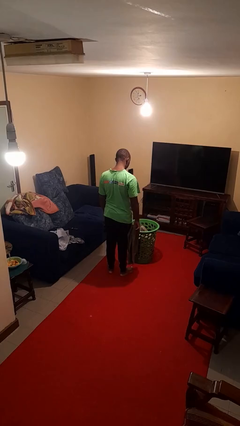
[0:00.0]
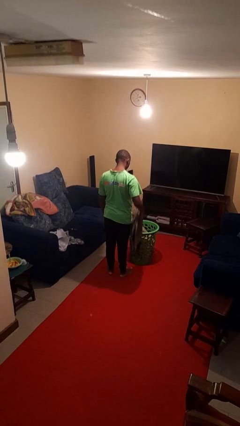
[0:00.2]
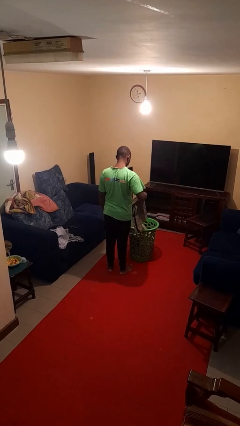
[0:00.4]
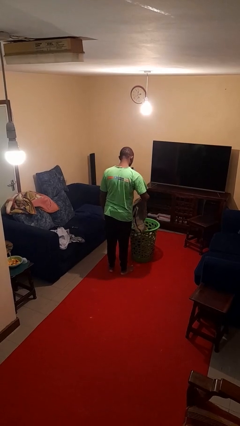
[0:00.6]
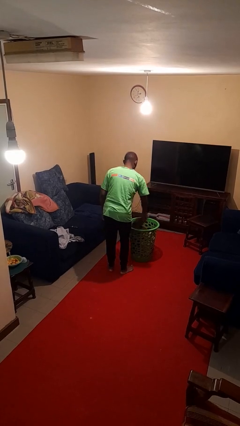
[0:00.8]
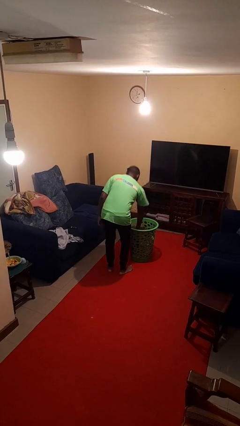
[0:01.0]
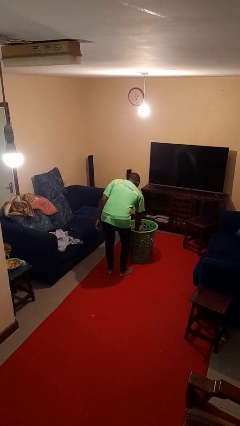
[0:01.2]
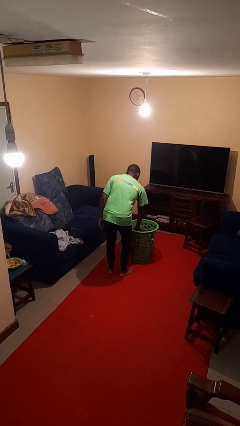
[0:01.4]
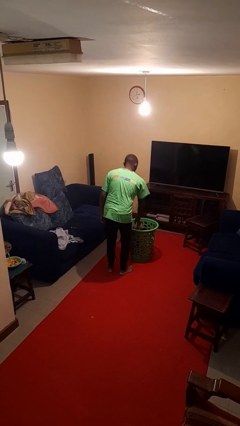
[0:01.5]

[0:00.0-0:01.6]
person puts object into basket

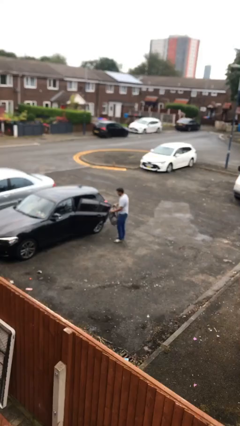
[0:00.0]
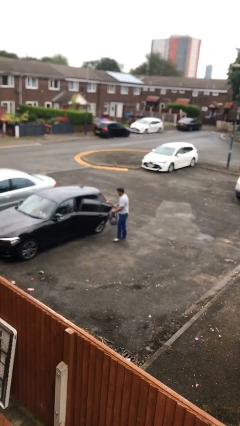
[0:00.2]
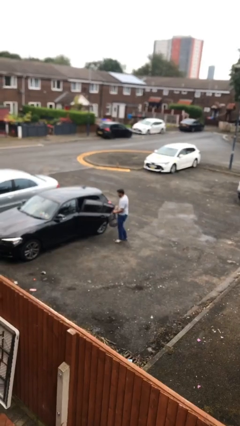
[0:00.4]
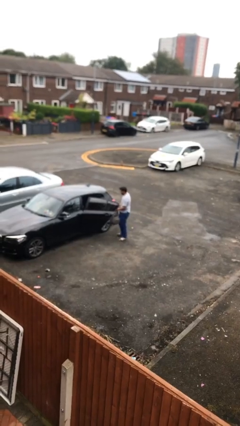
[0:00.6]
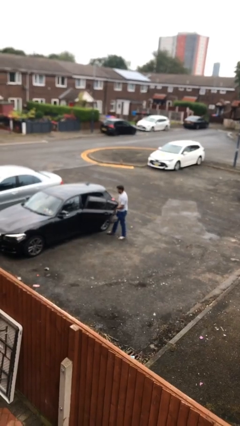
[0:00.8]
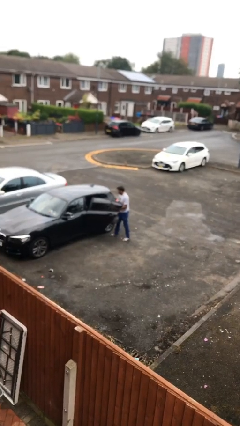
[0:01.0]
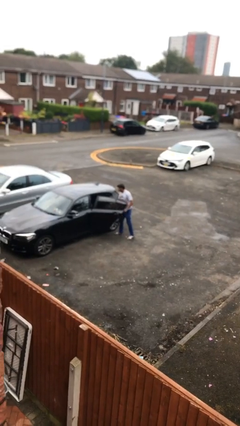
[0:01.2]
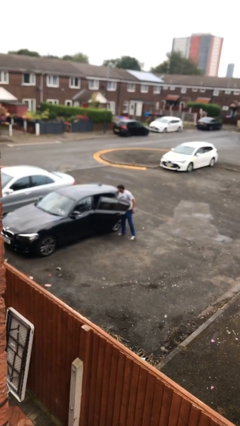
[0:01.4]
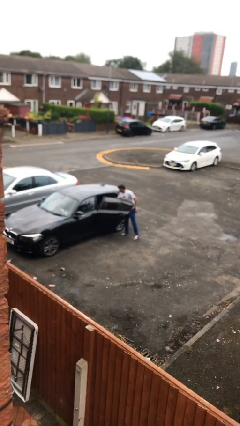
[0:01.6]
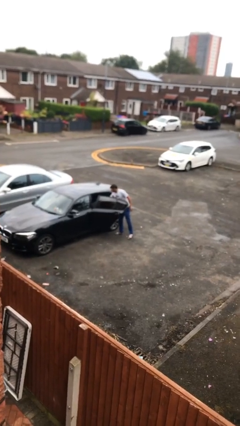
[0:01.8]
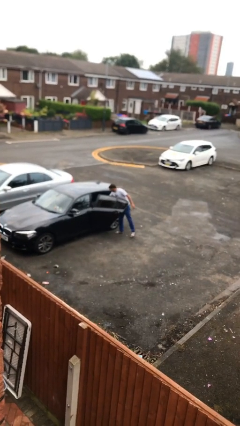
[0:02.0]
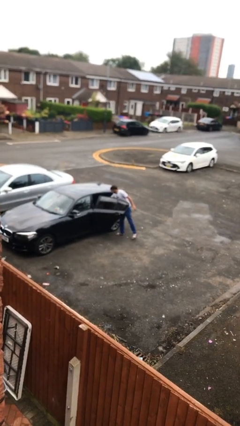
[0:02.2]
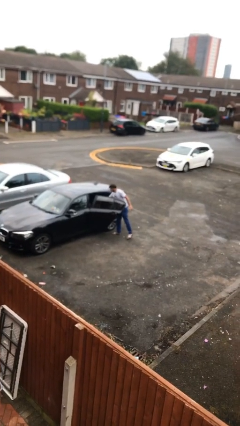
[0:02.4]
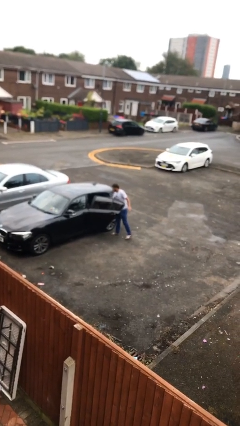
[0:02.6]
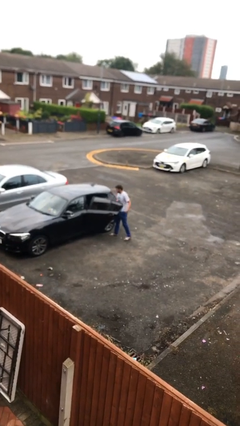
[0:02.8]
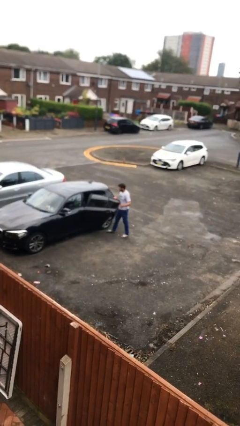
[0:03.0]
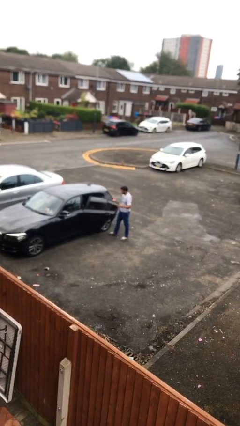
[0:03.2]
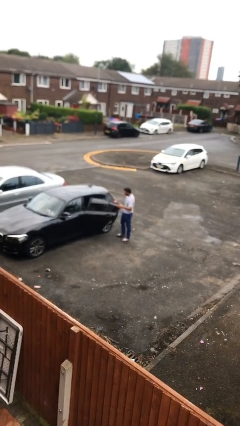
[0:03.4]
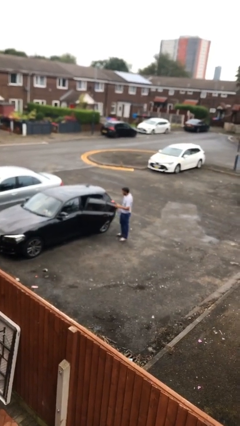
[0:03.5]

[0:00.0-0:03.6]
person loads car

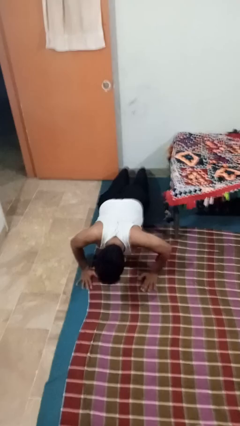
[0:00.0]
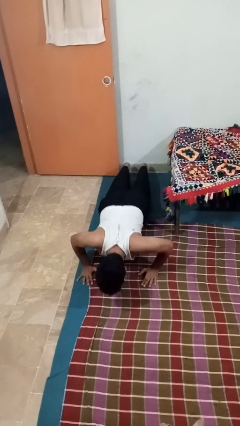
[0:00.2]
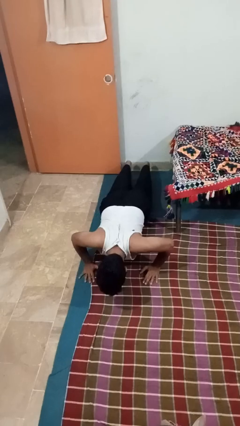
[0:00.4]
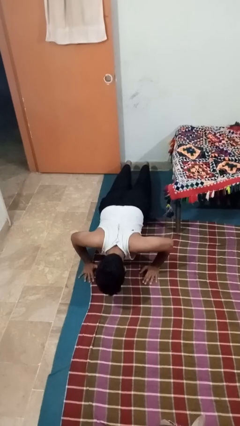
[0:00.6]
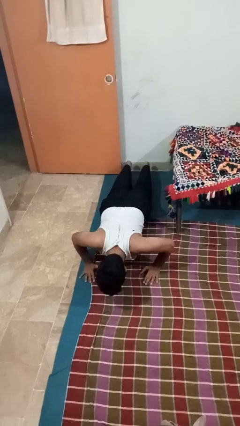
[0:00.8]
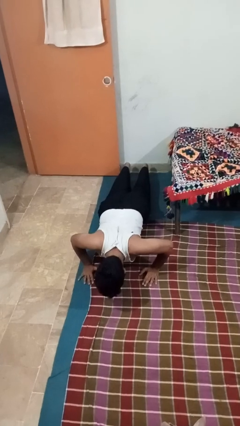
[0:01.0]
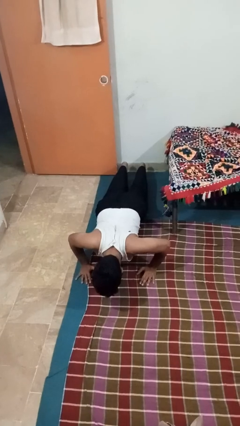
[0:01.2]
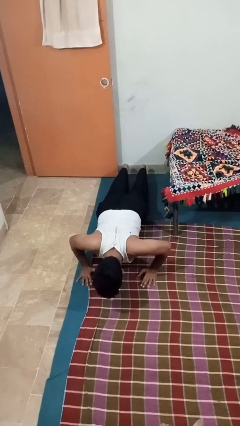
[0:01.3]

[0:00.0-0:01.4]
person exercises with pushup

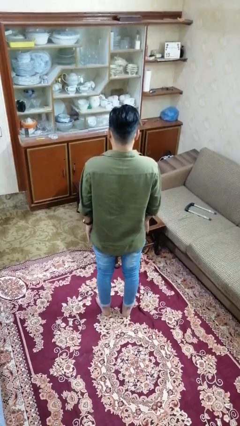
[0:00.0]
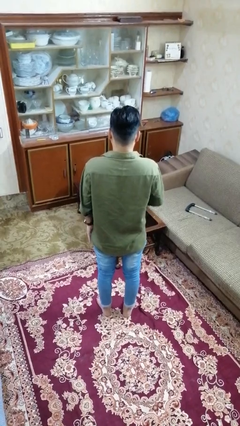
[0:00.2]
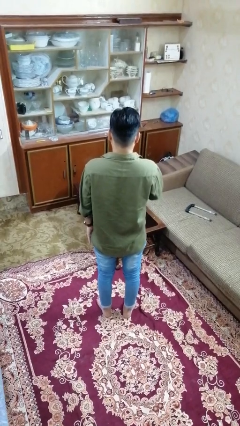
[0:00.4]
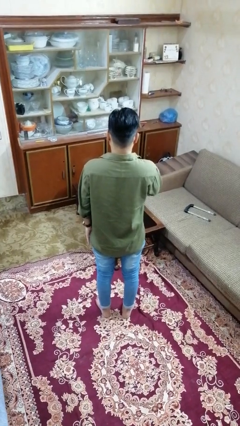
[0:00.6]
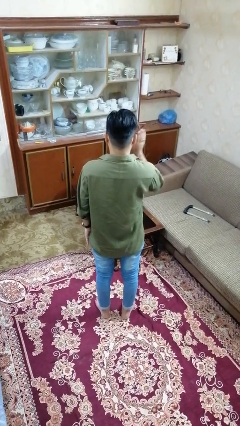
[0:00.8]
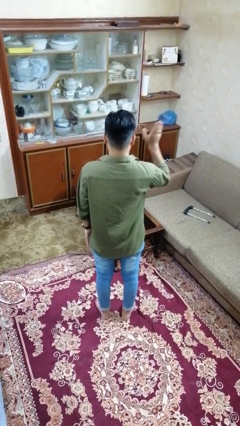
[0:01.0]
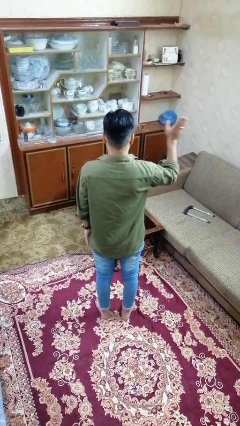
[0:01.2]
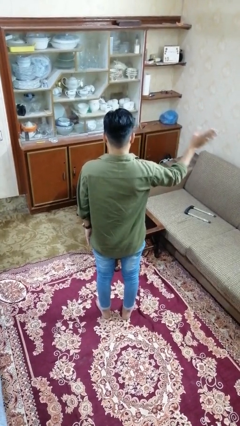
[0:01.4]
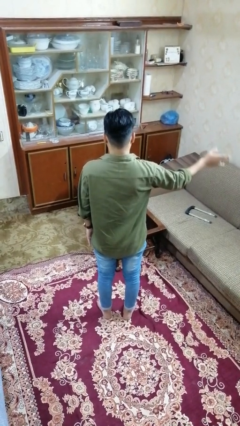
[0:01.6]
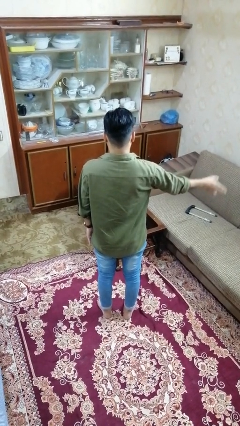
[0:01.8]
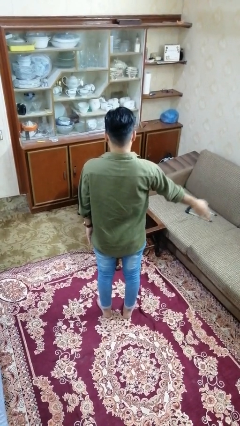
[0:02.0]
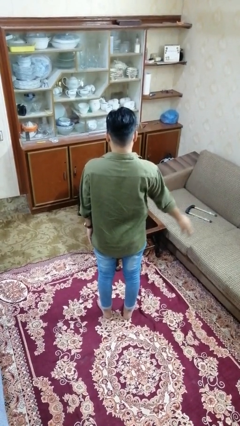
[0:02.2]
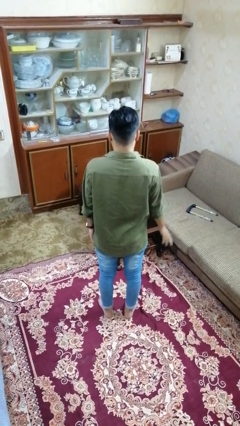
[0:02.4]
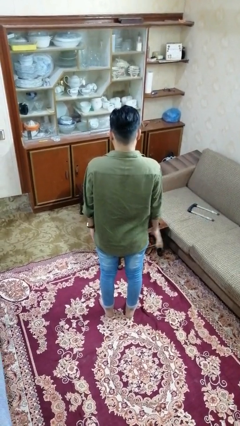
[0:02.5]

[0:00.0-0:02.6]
person gestures swipe right

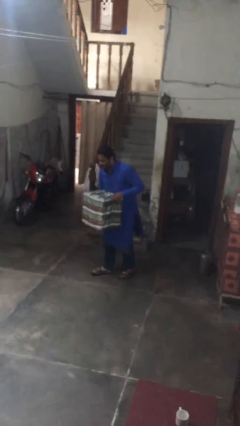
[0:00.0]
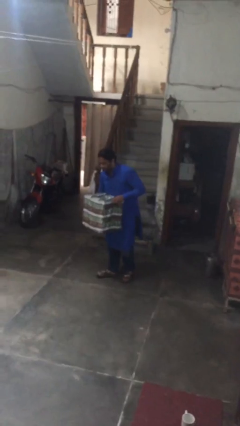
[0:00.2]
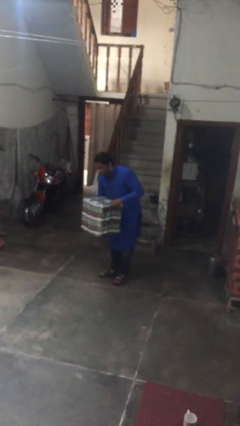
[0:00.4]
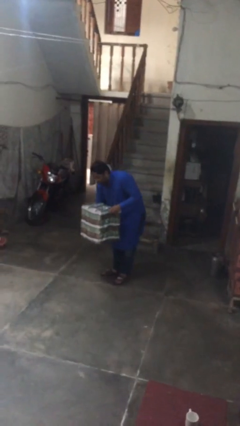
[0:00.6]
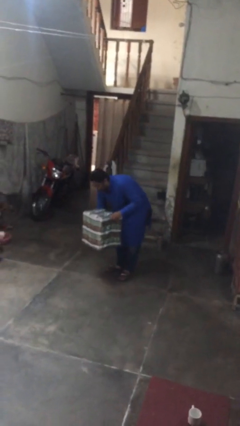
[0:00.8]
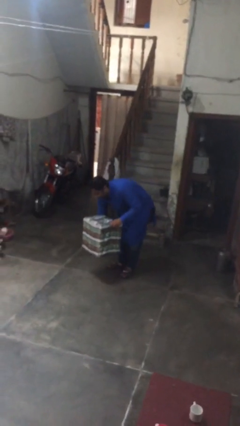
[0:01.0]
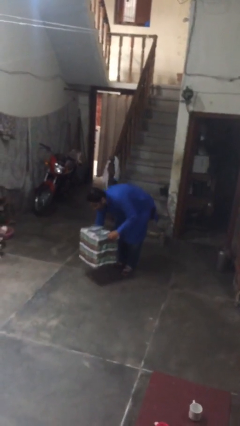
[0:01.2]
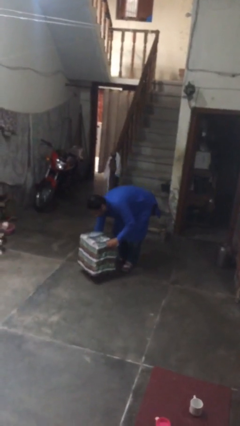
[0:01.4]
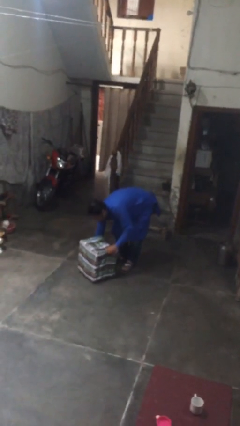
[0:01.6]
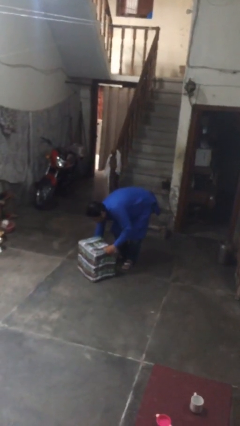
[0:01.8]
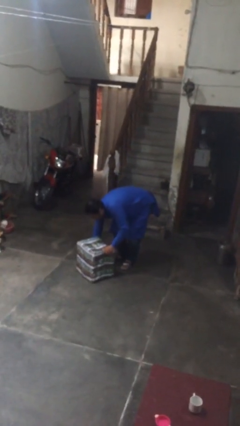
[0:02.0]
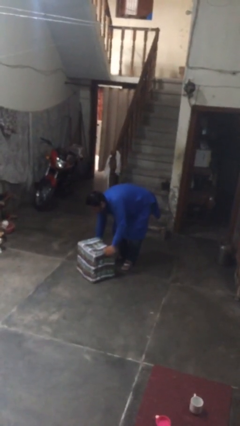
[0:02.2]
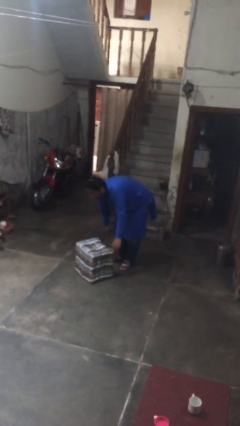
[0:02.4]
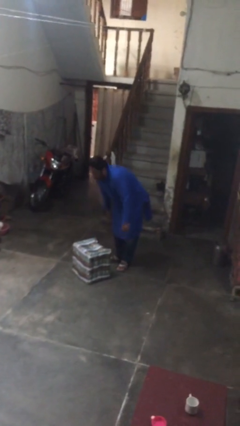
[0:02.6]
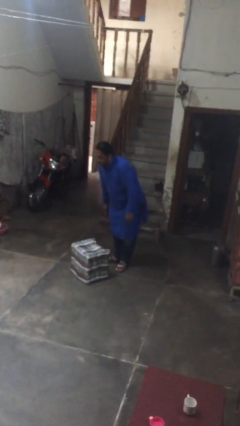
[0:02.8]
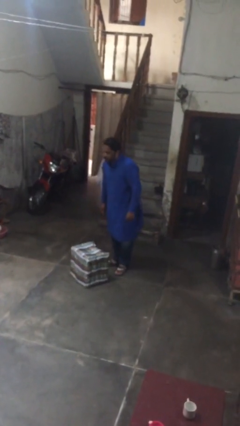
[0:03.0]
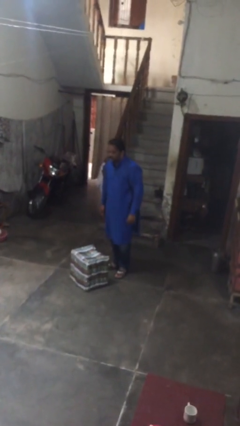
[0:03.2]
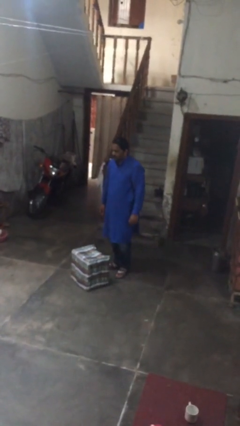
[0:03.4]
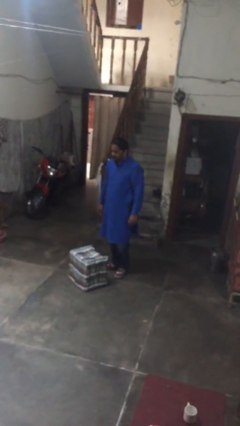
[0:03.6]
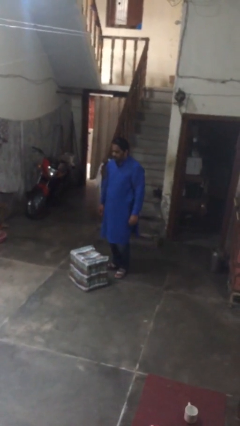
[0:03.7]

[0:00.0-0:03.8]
person puts down object on floor

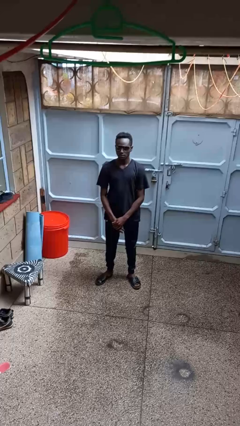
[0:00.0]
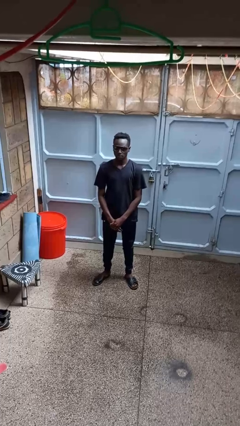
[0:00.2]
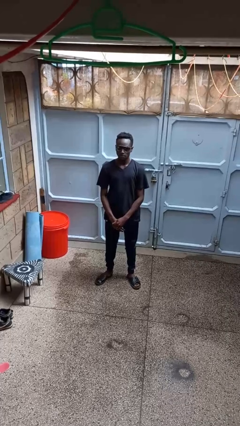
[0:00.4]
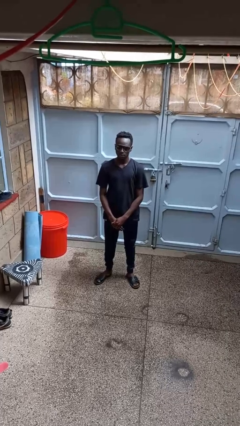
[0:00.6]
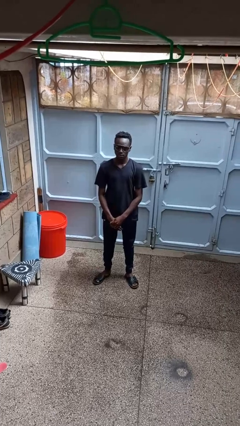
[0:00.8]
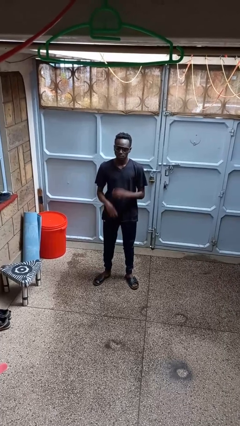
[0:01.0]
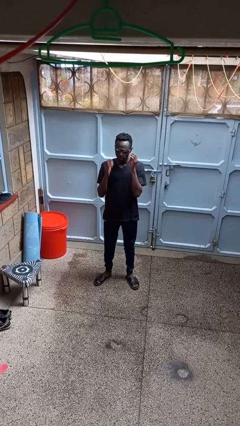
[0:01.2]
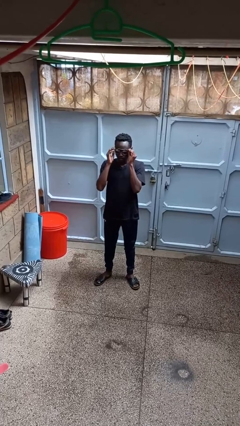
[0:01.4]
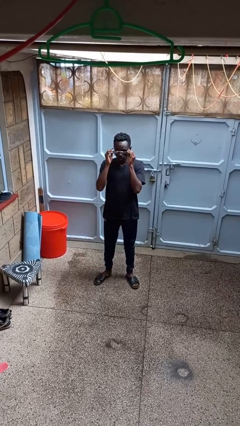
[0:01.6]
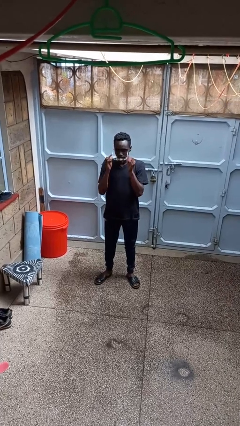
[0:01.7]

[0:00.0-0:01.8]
person takes off sunglasses

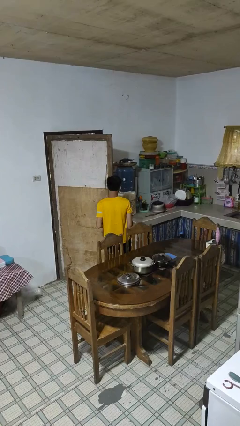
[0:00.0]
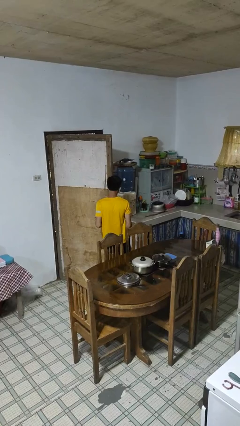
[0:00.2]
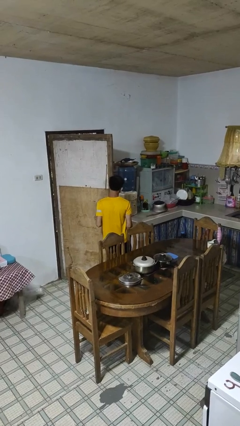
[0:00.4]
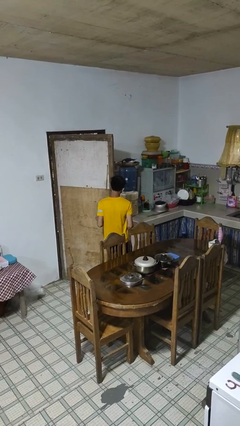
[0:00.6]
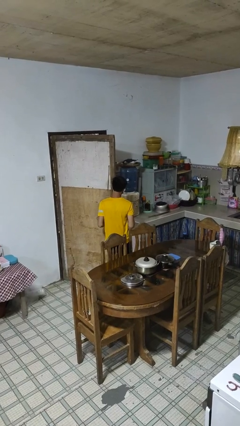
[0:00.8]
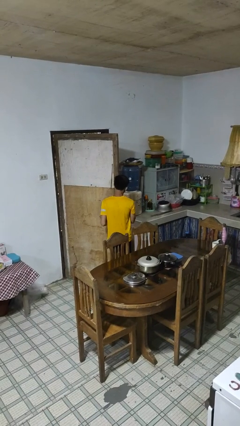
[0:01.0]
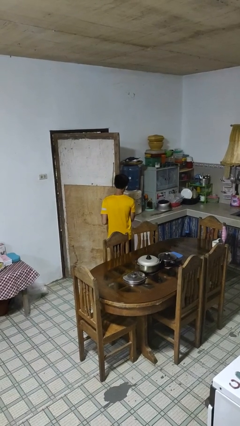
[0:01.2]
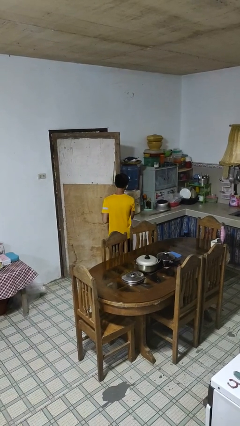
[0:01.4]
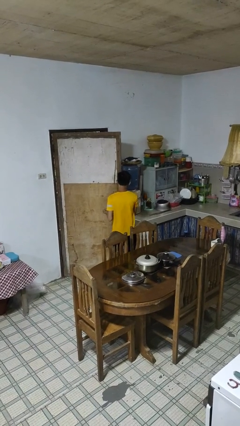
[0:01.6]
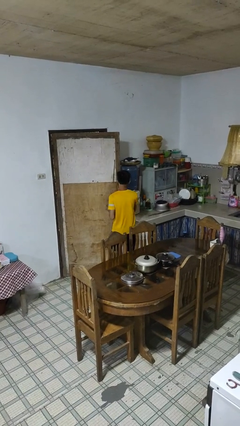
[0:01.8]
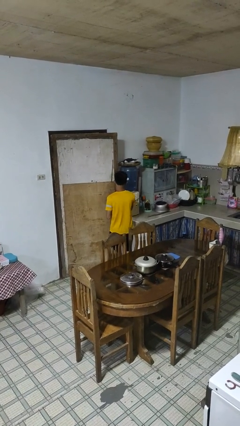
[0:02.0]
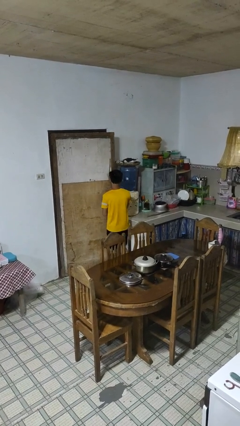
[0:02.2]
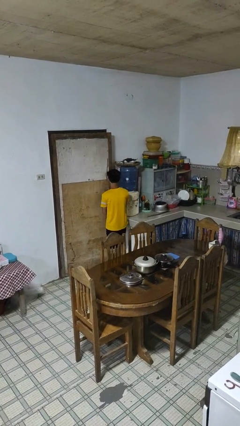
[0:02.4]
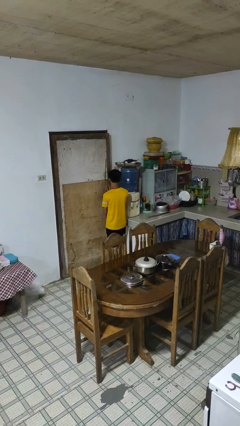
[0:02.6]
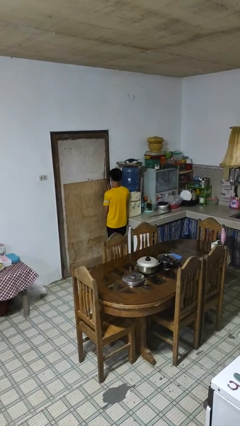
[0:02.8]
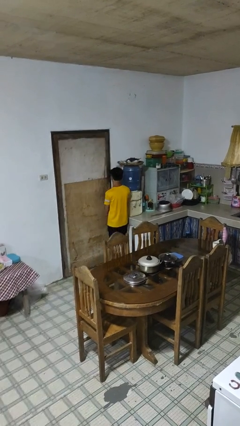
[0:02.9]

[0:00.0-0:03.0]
person closes facility door
